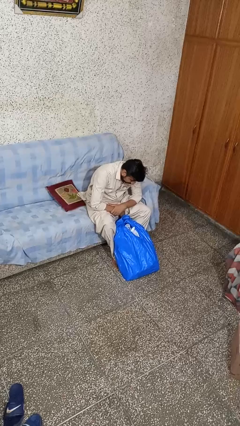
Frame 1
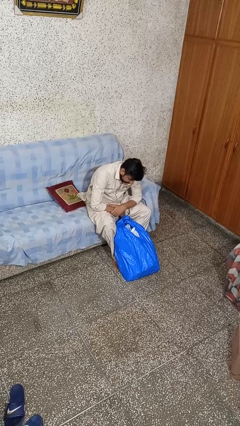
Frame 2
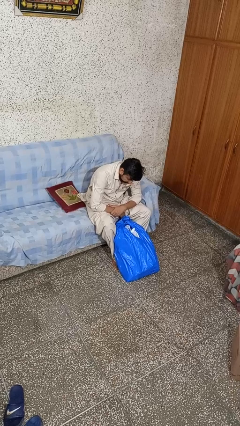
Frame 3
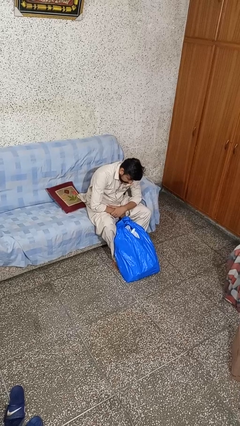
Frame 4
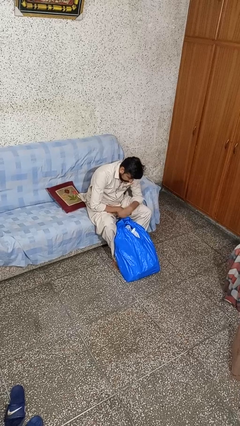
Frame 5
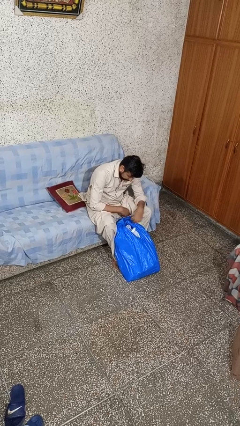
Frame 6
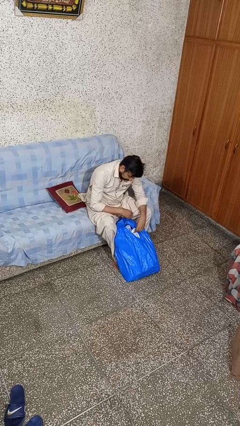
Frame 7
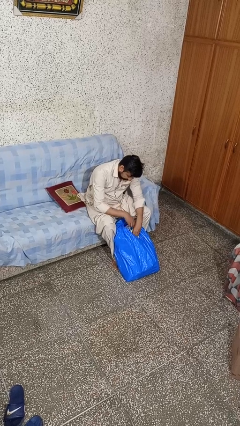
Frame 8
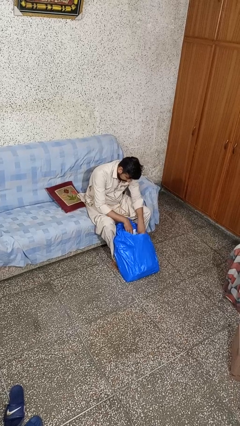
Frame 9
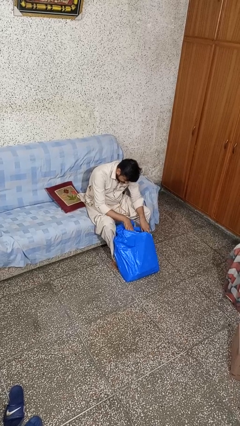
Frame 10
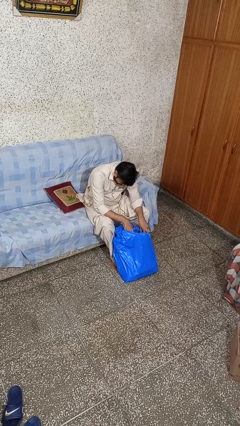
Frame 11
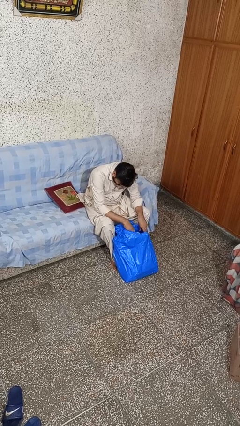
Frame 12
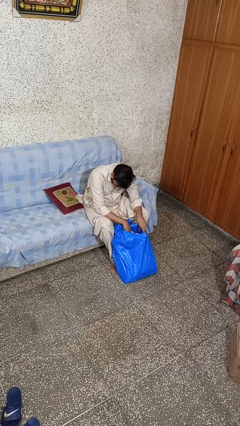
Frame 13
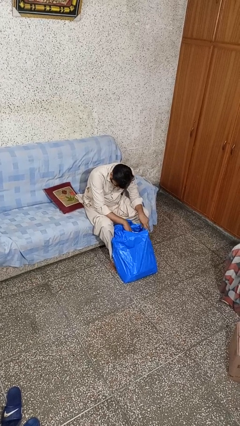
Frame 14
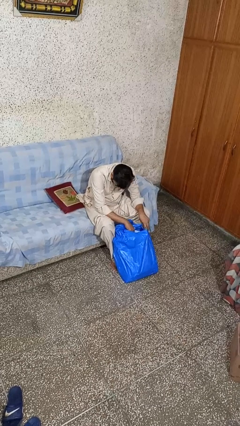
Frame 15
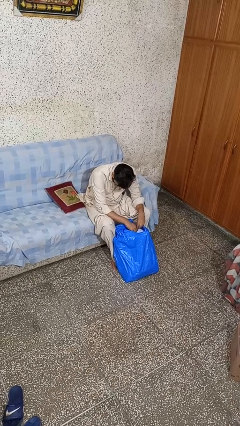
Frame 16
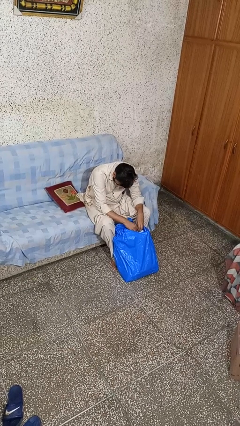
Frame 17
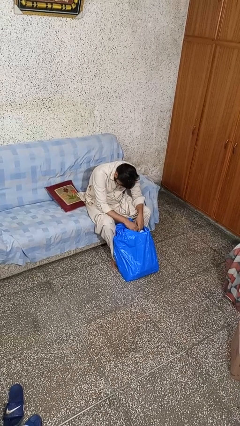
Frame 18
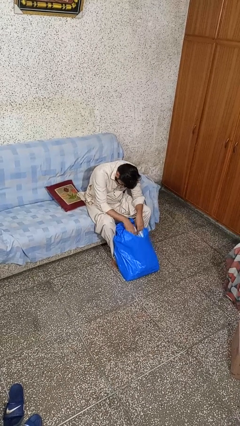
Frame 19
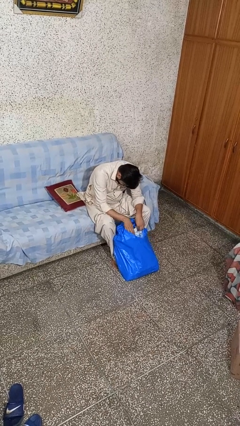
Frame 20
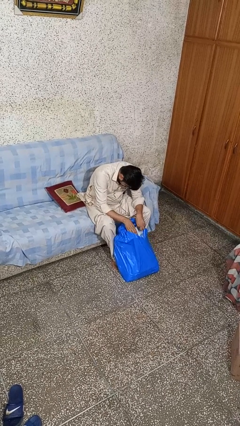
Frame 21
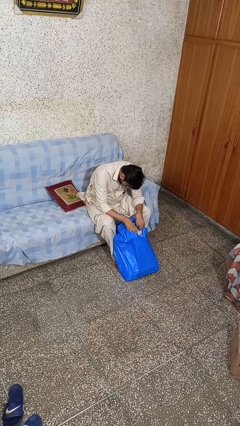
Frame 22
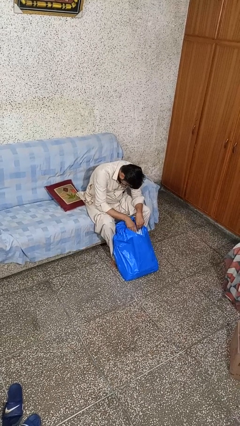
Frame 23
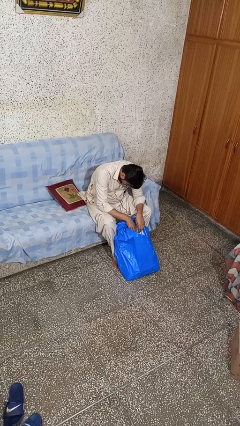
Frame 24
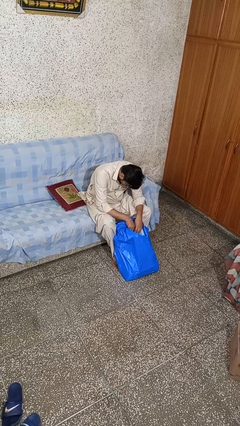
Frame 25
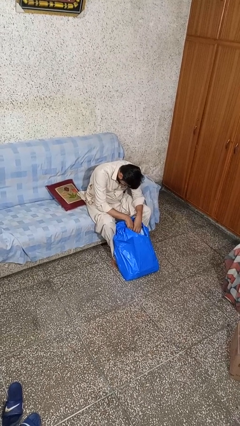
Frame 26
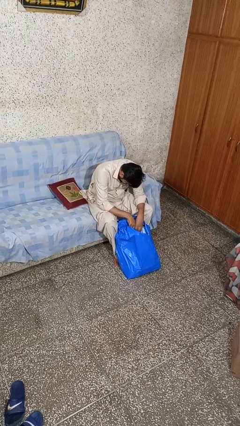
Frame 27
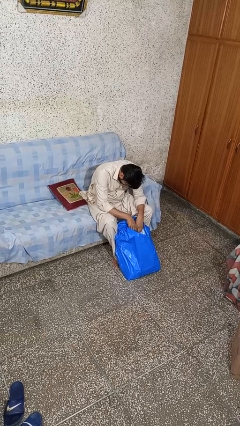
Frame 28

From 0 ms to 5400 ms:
person searches in bag

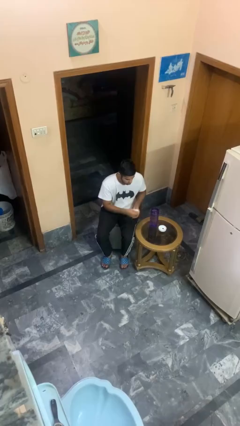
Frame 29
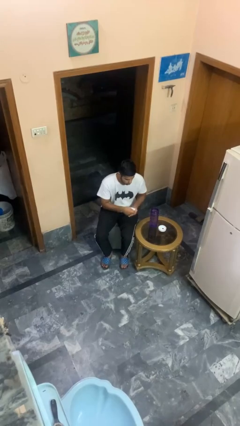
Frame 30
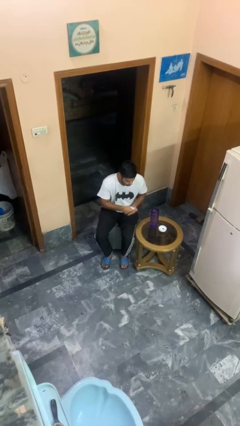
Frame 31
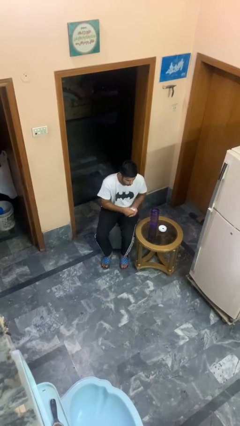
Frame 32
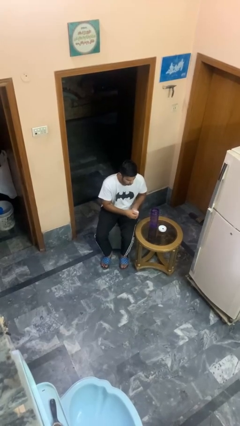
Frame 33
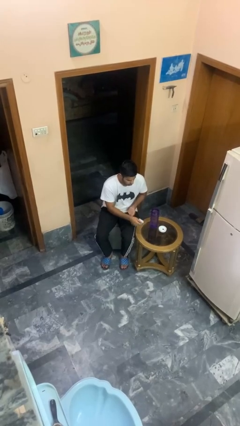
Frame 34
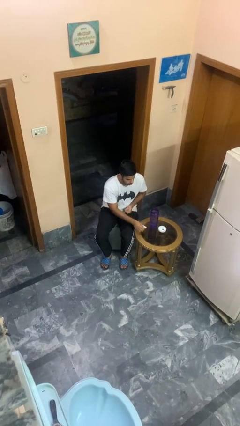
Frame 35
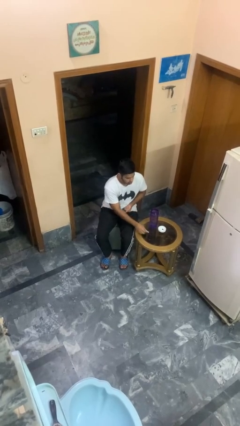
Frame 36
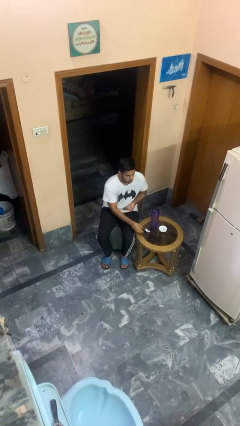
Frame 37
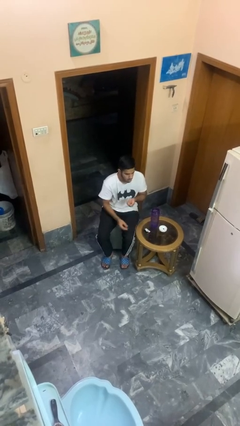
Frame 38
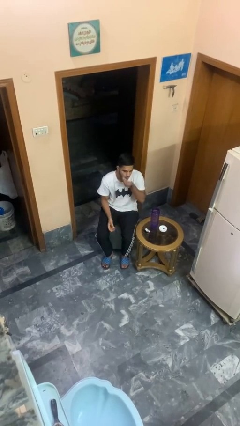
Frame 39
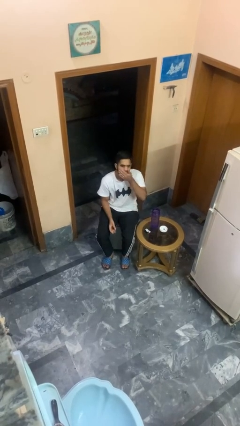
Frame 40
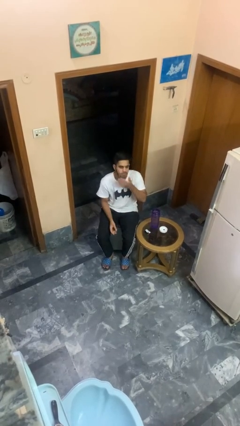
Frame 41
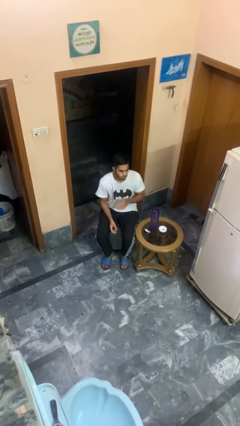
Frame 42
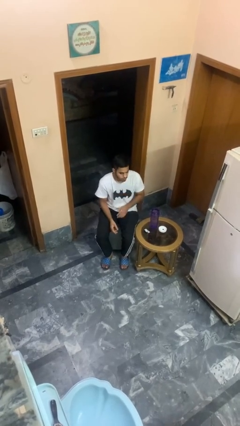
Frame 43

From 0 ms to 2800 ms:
person takes medicine pills

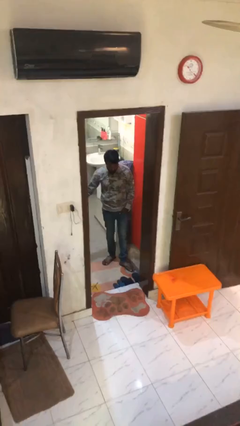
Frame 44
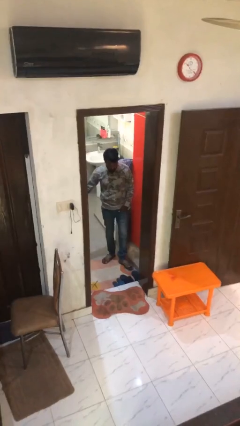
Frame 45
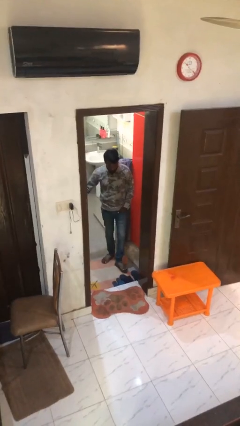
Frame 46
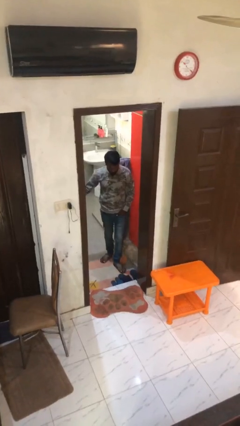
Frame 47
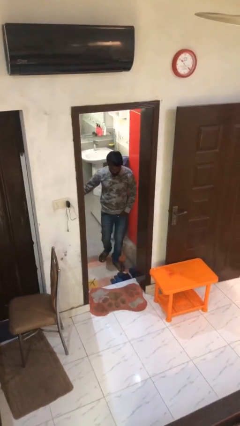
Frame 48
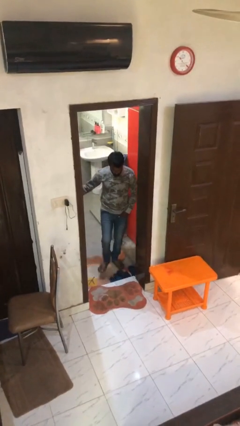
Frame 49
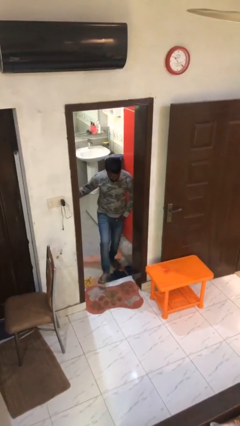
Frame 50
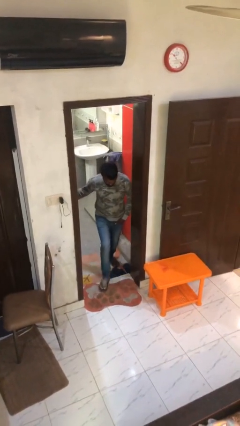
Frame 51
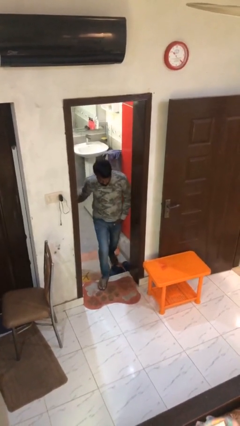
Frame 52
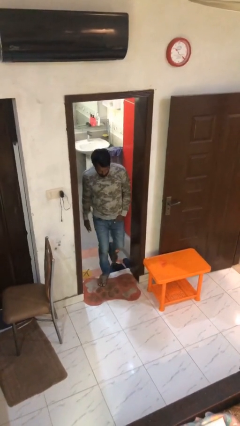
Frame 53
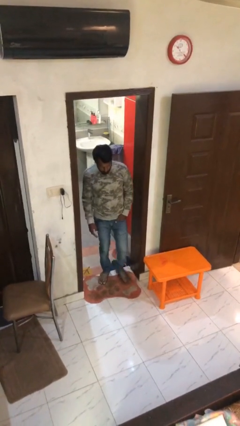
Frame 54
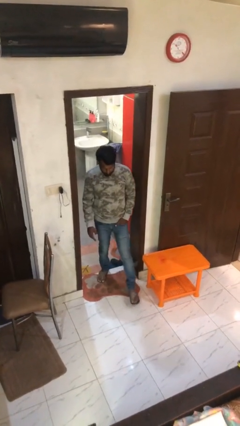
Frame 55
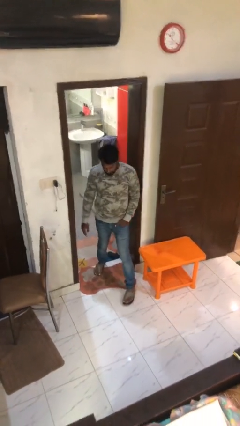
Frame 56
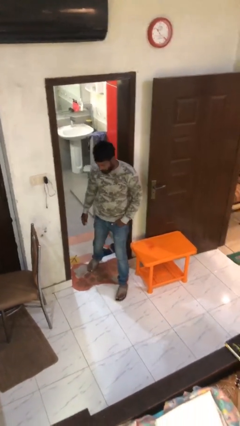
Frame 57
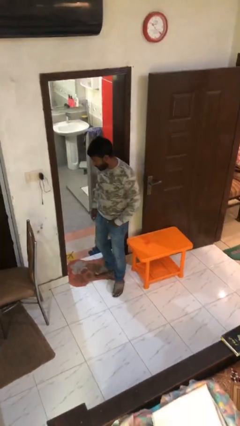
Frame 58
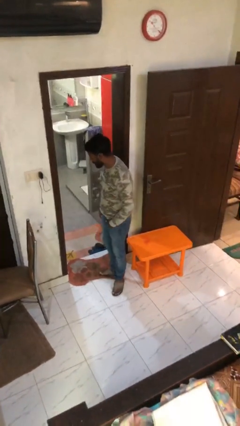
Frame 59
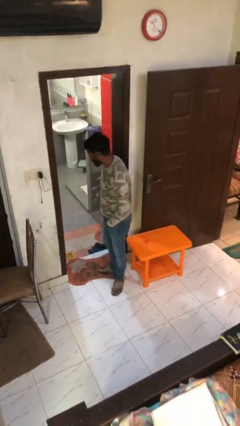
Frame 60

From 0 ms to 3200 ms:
person enters scene through structure

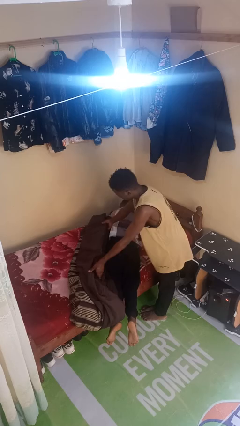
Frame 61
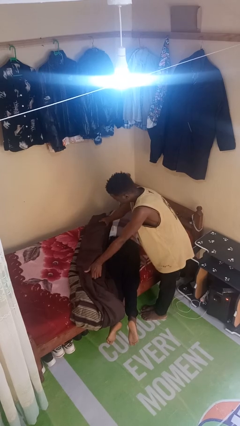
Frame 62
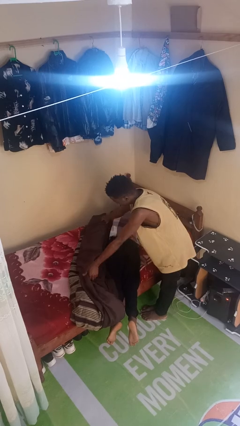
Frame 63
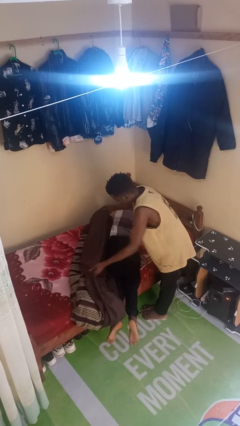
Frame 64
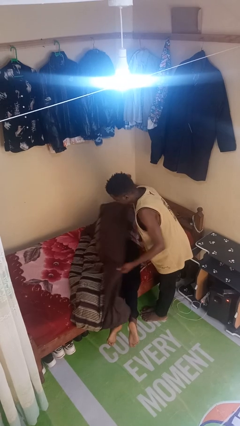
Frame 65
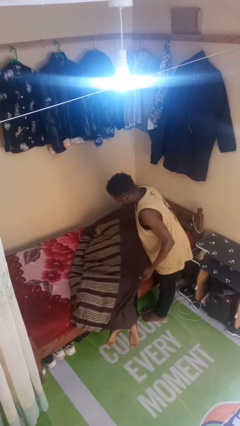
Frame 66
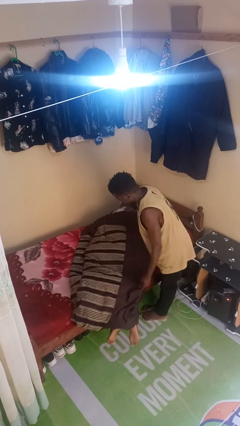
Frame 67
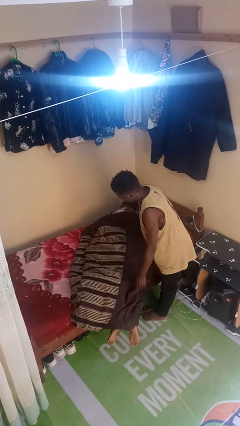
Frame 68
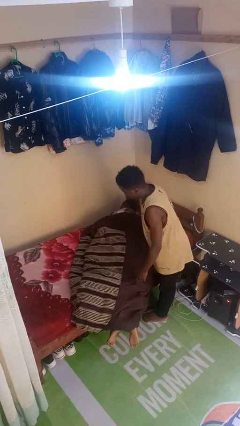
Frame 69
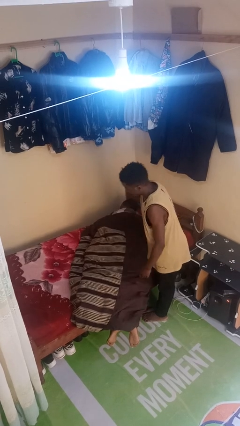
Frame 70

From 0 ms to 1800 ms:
person covers friend with blanket

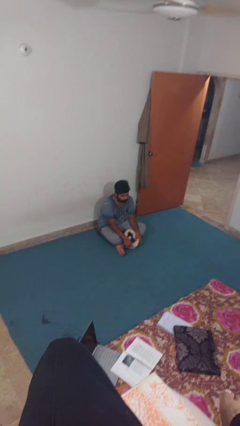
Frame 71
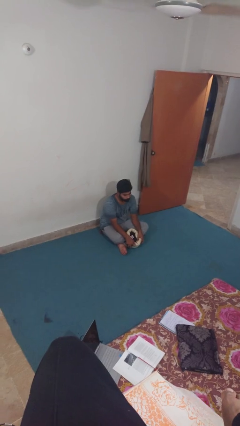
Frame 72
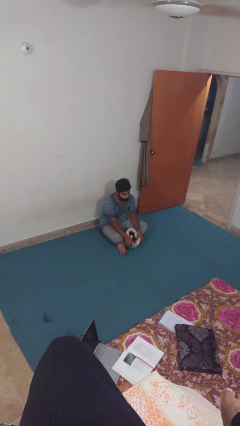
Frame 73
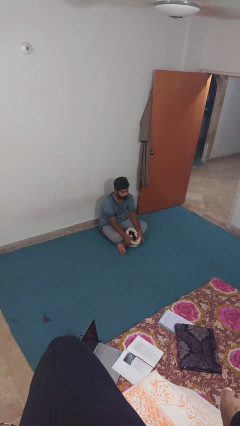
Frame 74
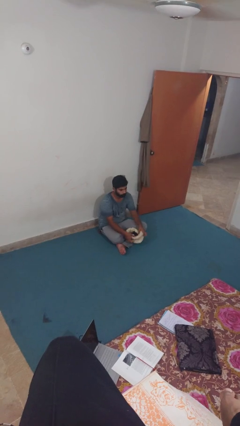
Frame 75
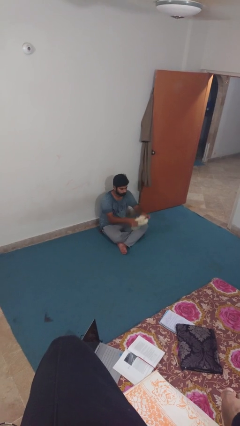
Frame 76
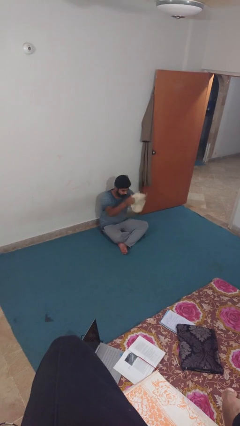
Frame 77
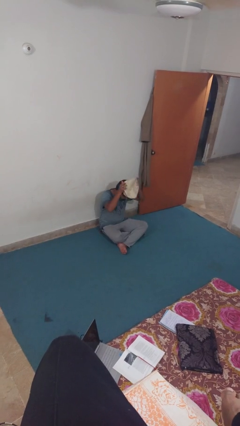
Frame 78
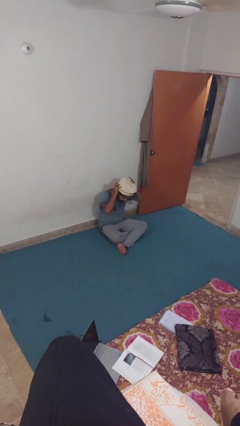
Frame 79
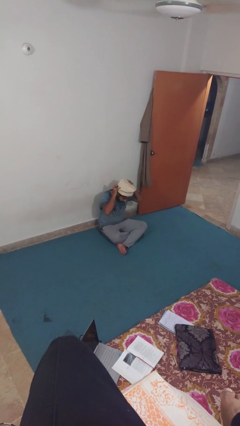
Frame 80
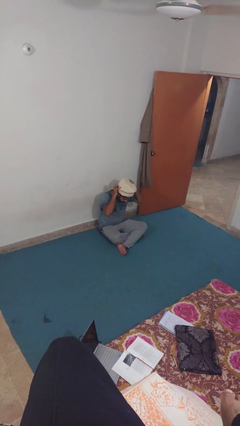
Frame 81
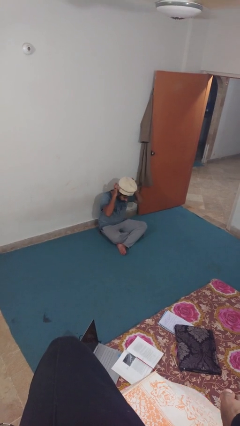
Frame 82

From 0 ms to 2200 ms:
person puts on hat

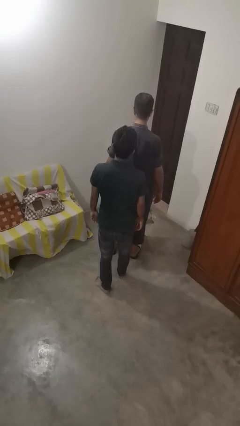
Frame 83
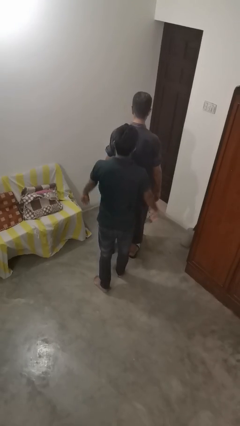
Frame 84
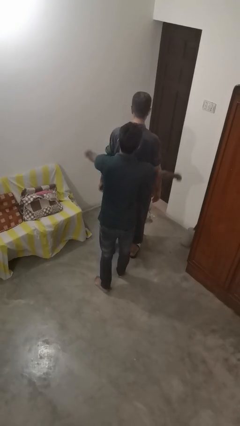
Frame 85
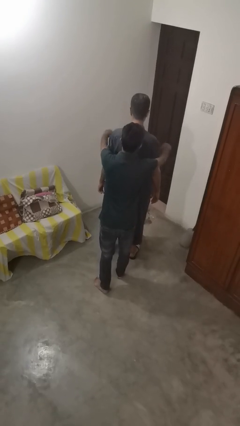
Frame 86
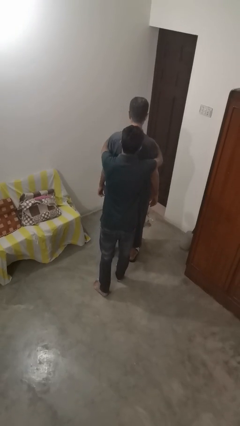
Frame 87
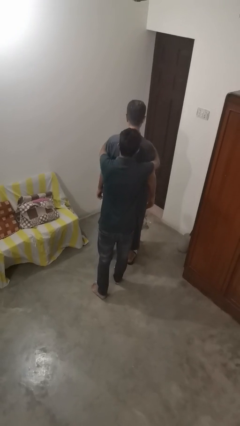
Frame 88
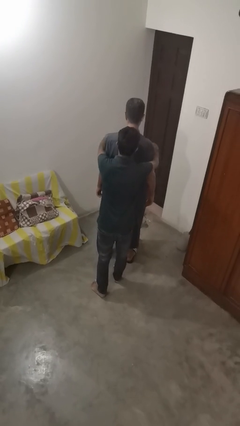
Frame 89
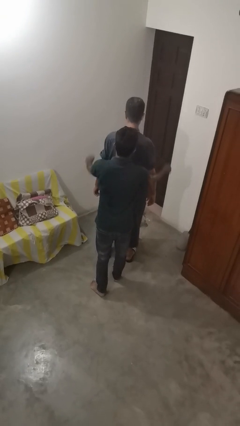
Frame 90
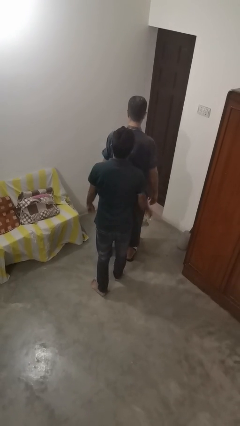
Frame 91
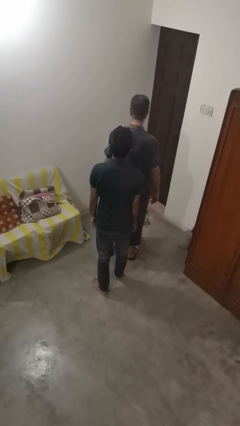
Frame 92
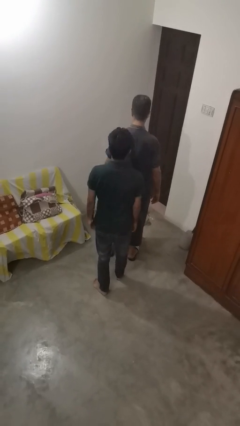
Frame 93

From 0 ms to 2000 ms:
person hugs person from behind
